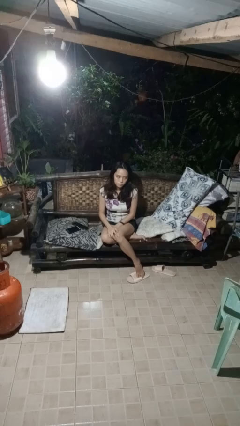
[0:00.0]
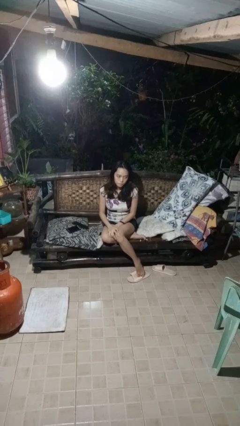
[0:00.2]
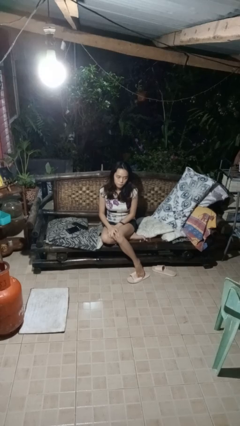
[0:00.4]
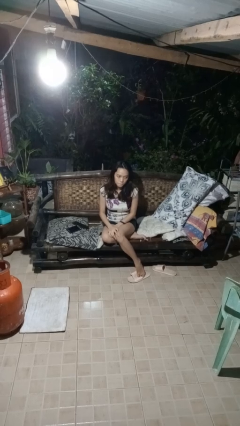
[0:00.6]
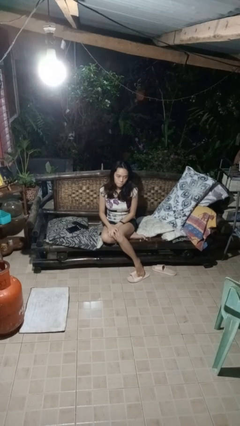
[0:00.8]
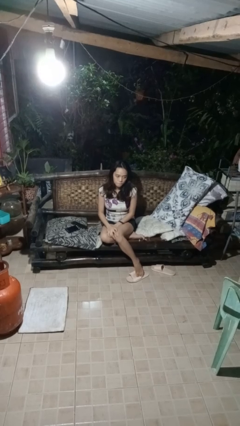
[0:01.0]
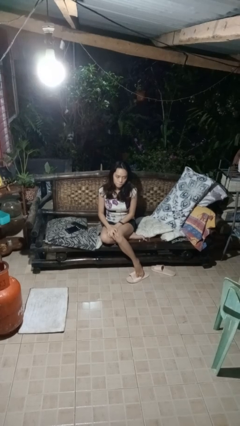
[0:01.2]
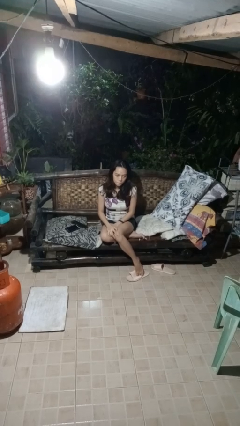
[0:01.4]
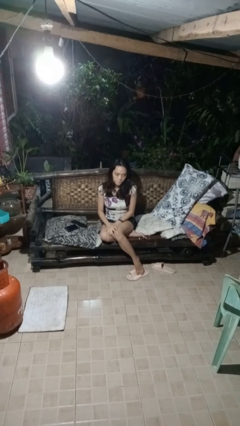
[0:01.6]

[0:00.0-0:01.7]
person searches in couch

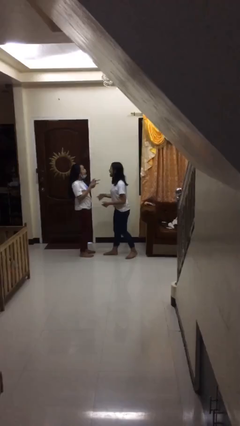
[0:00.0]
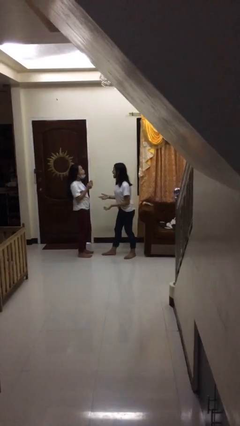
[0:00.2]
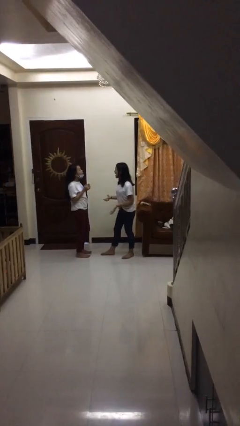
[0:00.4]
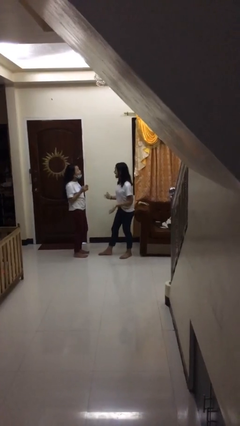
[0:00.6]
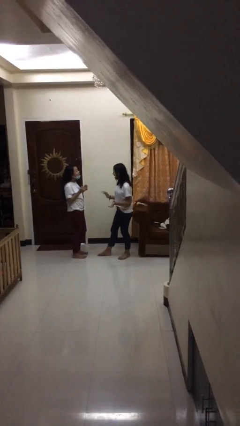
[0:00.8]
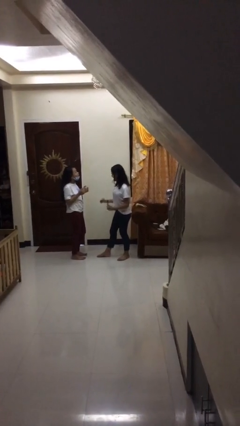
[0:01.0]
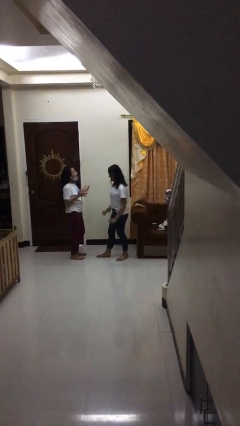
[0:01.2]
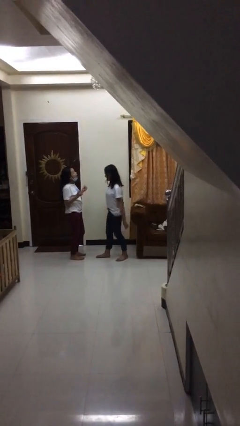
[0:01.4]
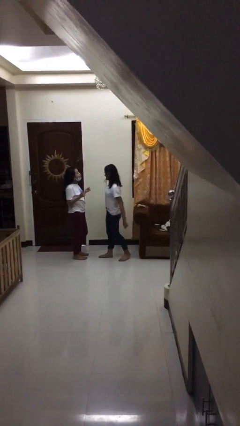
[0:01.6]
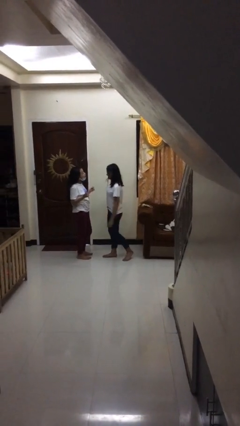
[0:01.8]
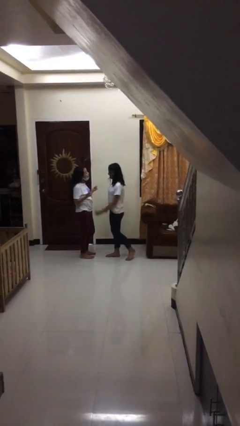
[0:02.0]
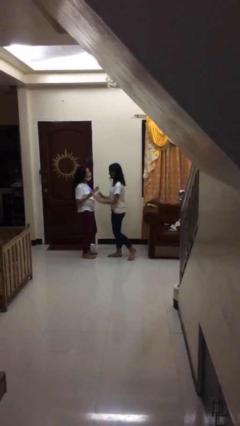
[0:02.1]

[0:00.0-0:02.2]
person talks to person

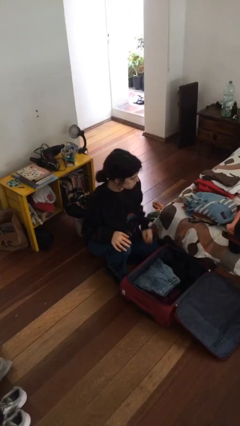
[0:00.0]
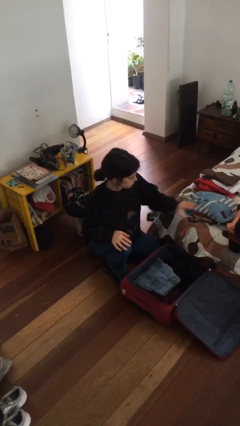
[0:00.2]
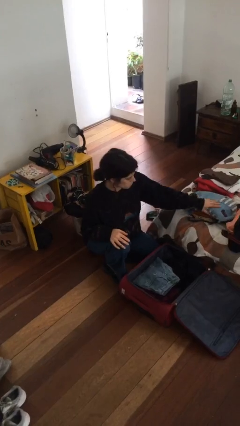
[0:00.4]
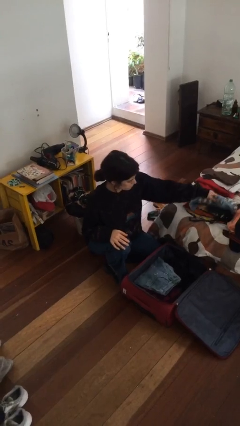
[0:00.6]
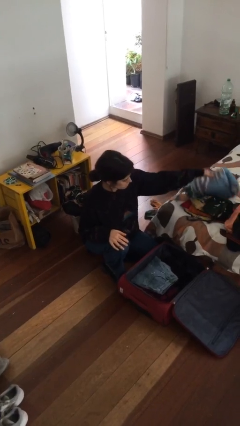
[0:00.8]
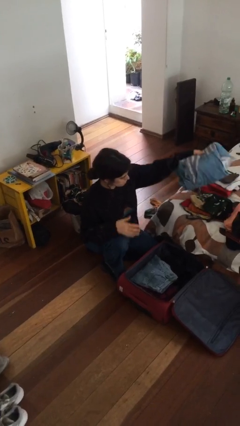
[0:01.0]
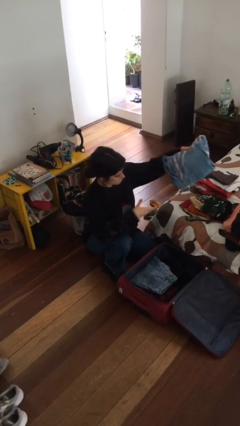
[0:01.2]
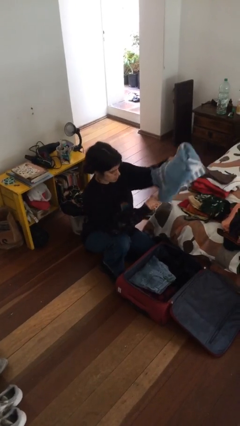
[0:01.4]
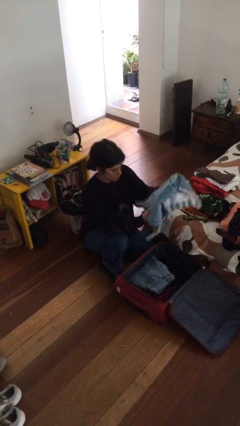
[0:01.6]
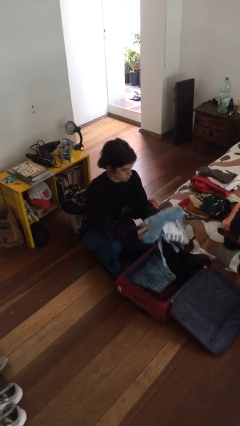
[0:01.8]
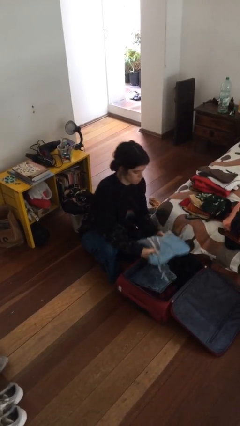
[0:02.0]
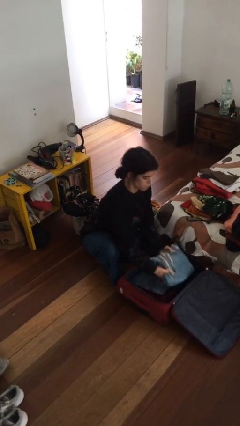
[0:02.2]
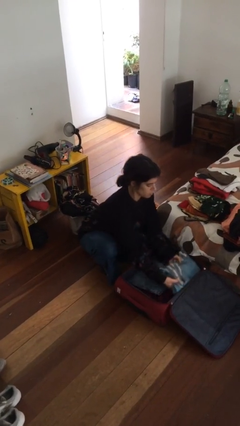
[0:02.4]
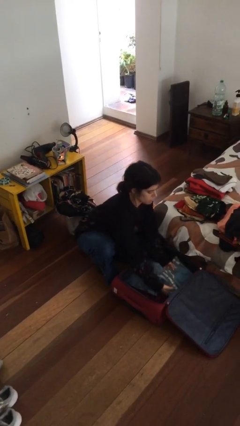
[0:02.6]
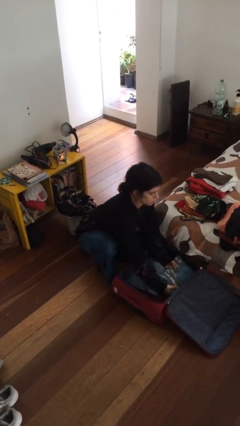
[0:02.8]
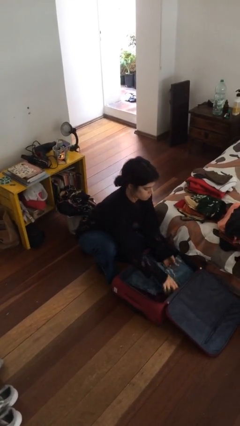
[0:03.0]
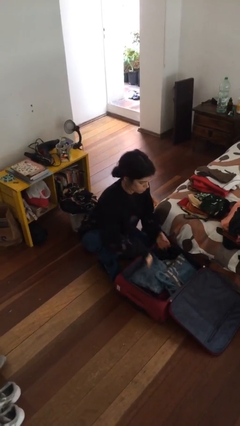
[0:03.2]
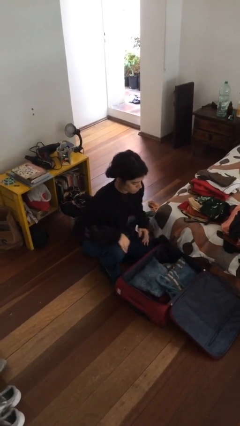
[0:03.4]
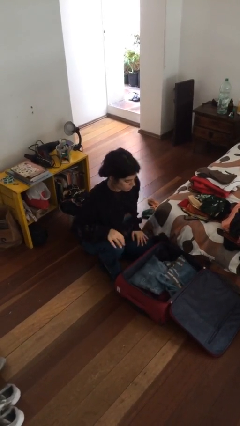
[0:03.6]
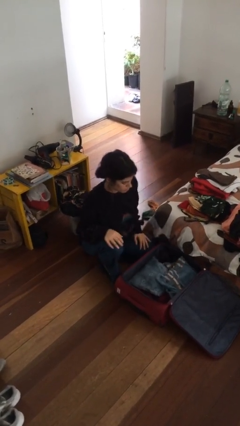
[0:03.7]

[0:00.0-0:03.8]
person loads clothes into suitcase

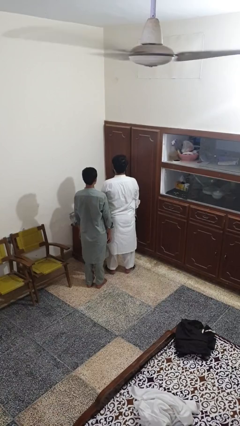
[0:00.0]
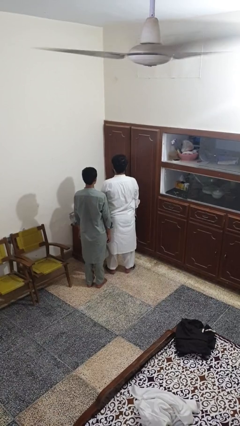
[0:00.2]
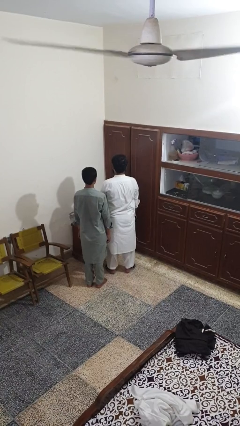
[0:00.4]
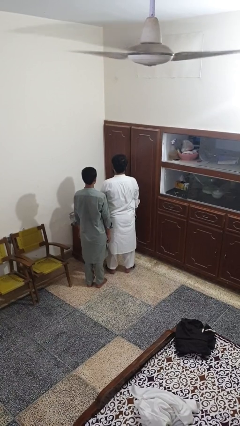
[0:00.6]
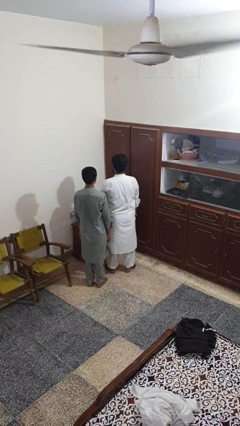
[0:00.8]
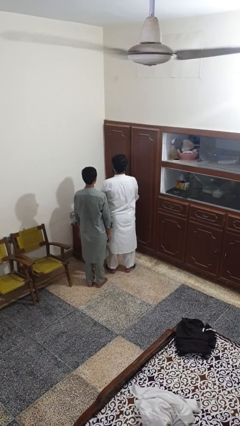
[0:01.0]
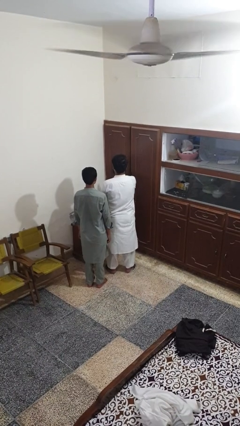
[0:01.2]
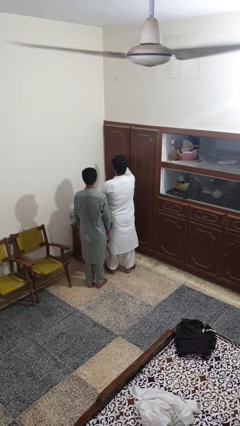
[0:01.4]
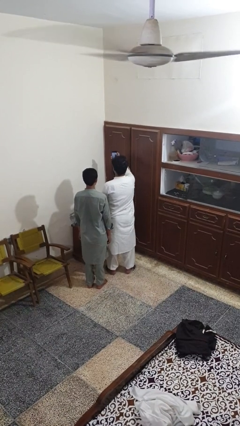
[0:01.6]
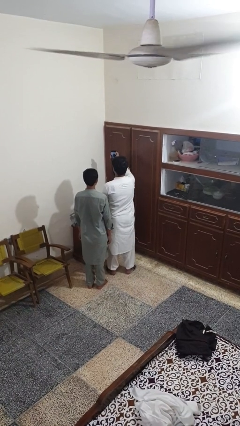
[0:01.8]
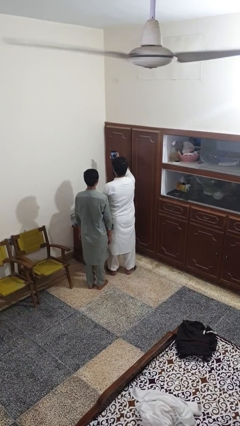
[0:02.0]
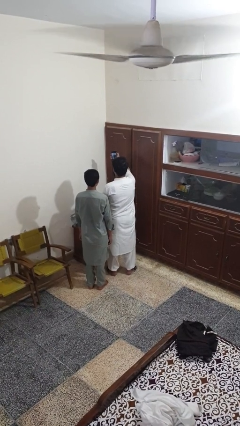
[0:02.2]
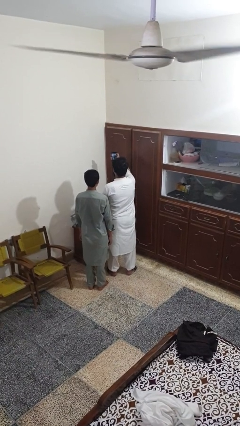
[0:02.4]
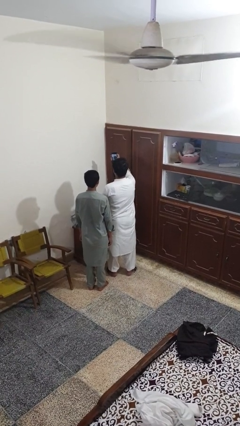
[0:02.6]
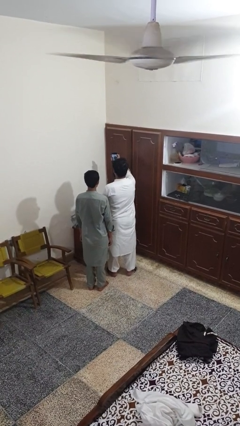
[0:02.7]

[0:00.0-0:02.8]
person takes selfie with person

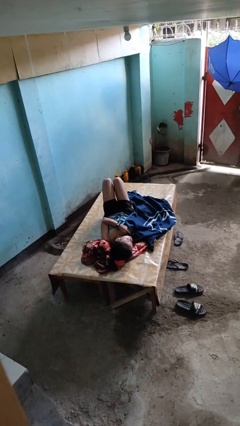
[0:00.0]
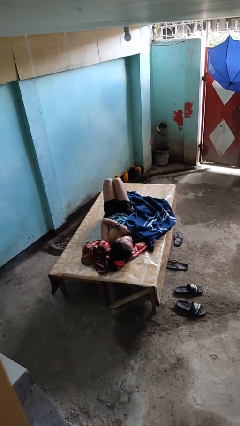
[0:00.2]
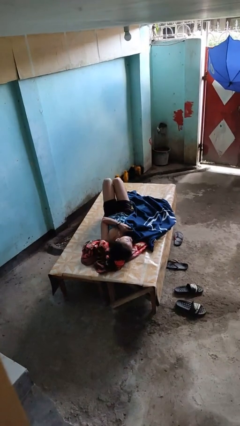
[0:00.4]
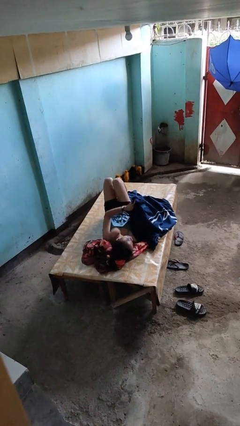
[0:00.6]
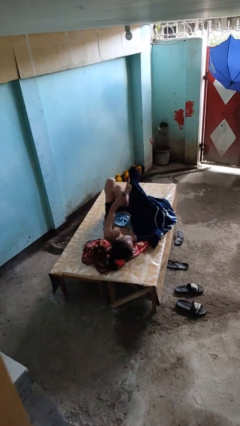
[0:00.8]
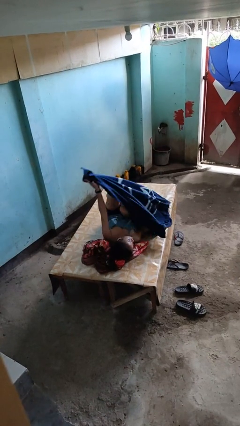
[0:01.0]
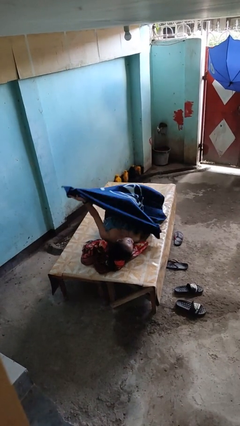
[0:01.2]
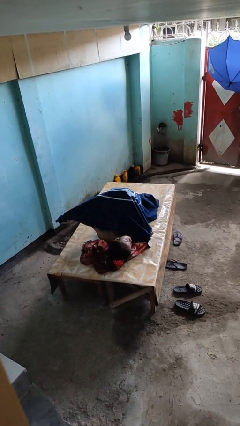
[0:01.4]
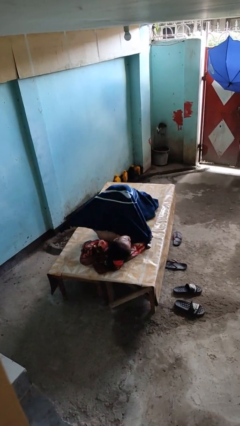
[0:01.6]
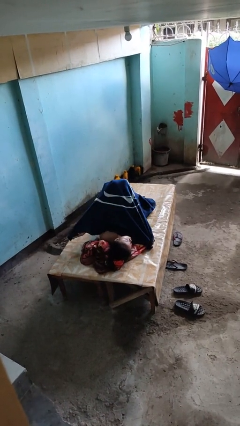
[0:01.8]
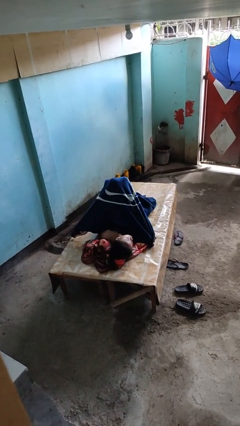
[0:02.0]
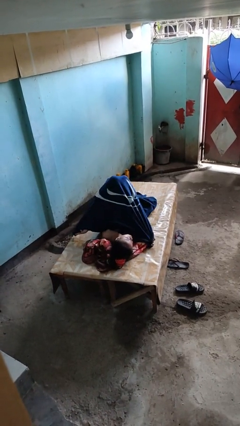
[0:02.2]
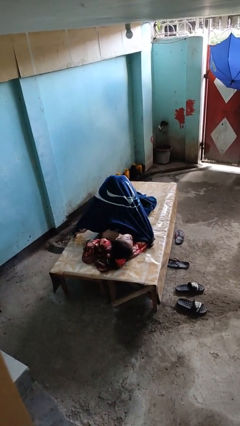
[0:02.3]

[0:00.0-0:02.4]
person covers with bedsheets

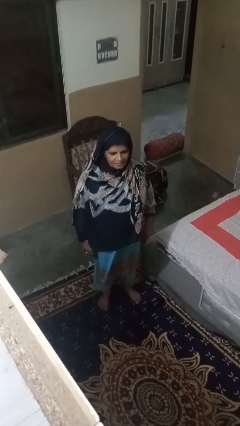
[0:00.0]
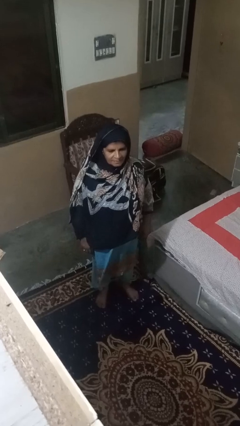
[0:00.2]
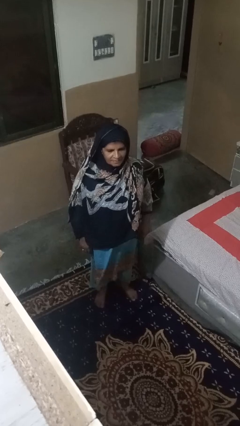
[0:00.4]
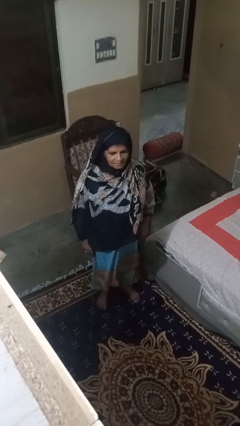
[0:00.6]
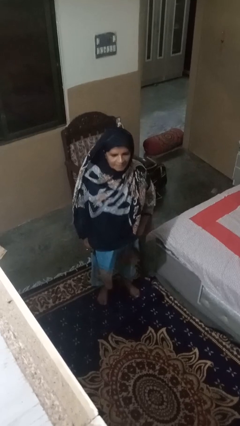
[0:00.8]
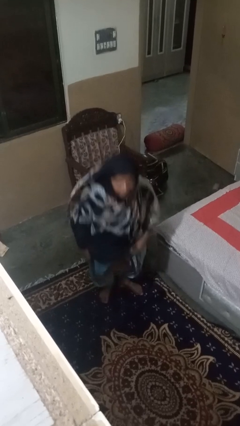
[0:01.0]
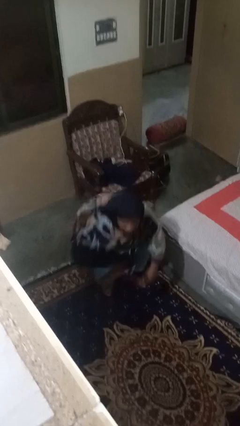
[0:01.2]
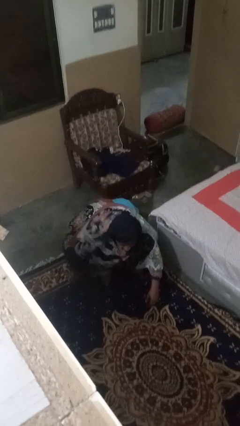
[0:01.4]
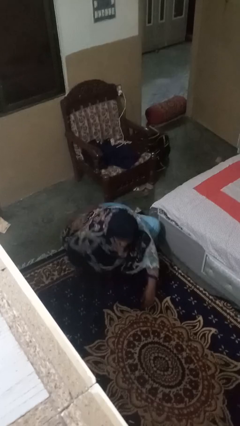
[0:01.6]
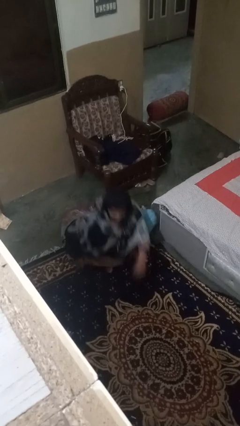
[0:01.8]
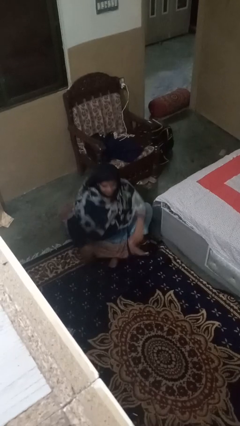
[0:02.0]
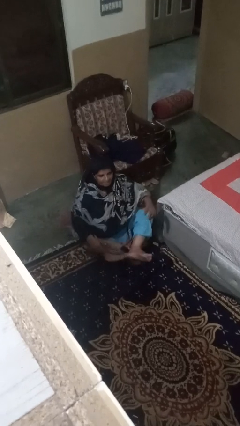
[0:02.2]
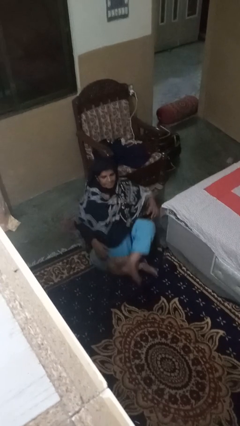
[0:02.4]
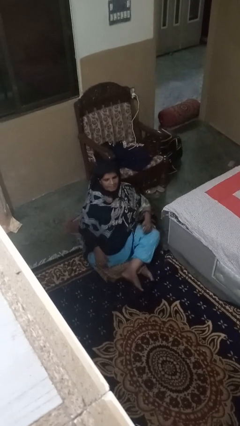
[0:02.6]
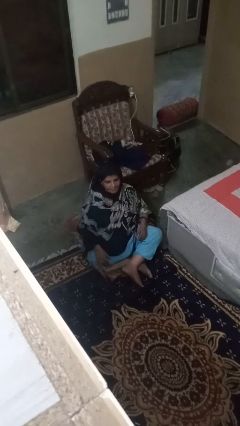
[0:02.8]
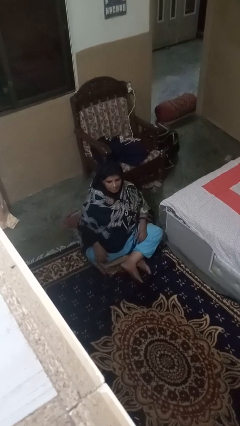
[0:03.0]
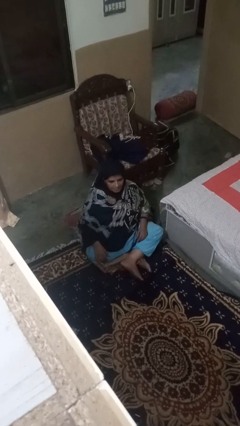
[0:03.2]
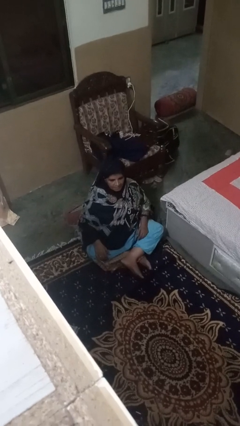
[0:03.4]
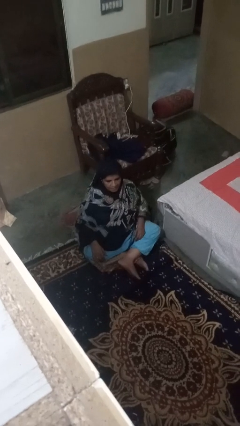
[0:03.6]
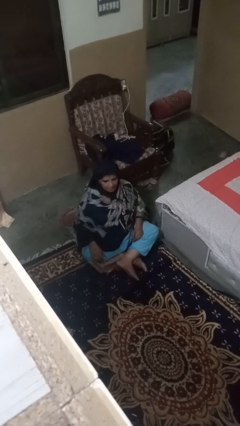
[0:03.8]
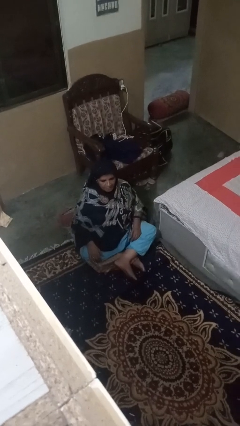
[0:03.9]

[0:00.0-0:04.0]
person sits crisscross

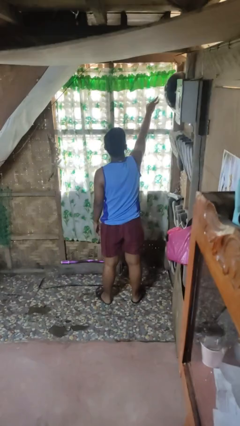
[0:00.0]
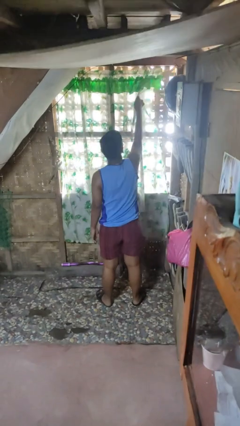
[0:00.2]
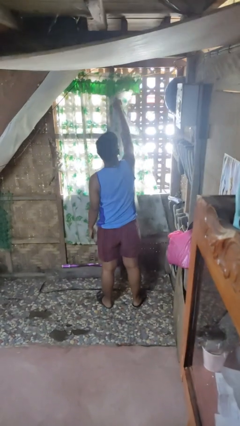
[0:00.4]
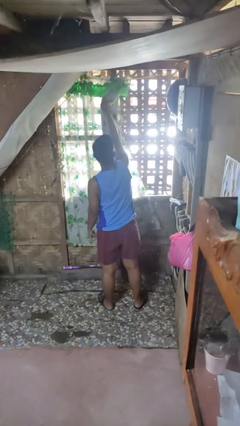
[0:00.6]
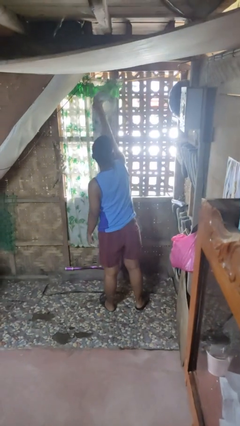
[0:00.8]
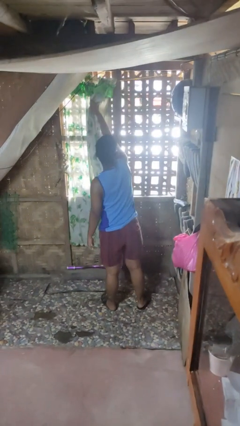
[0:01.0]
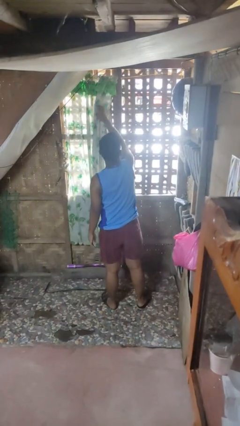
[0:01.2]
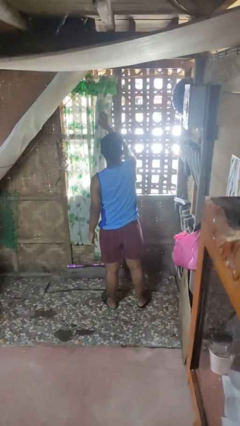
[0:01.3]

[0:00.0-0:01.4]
person opens curtains
